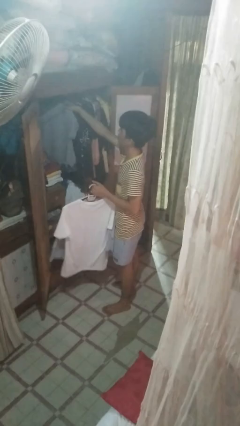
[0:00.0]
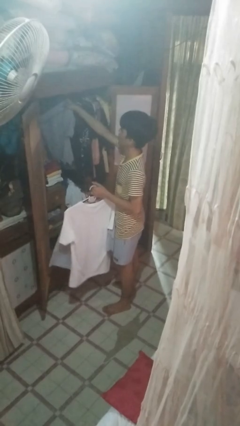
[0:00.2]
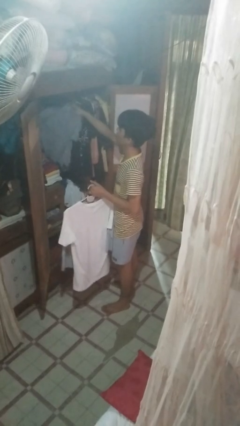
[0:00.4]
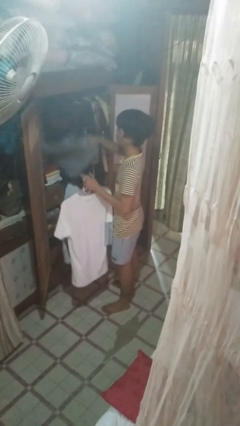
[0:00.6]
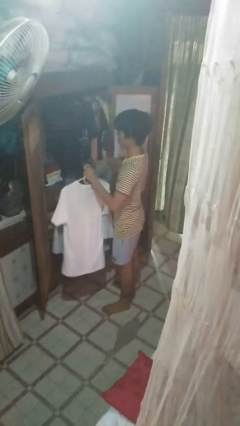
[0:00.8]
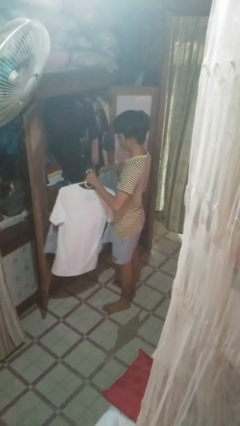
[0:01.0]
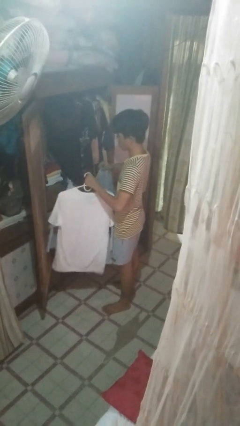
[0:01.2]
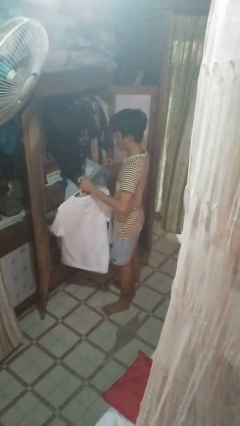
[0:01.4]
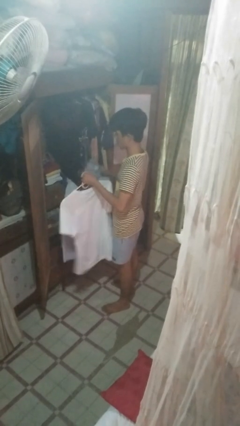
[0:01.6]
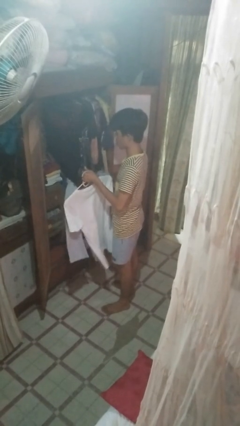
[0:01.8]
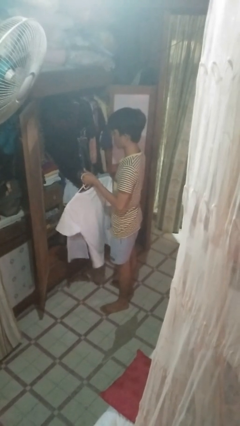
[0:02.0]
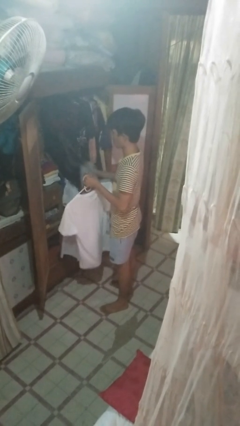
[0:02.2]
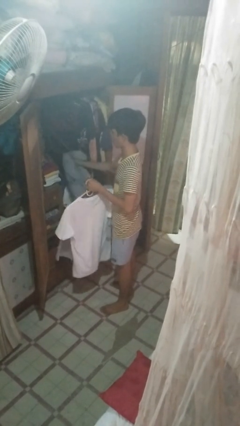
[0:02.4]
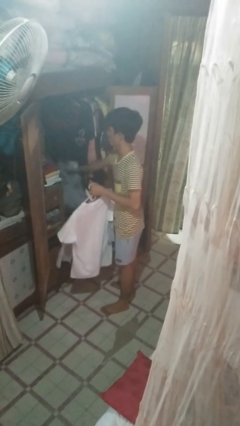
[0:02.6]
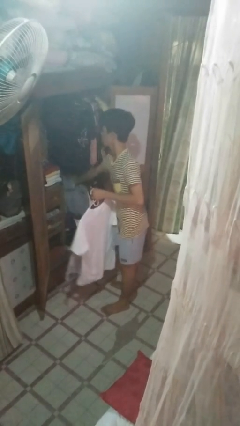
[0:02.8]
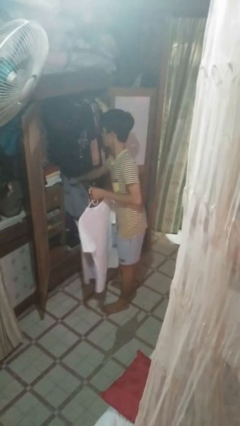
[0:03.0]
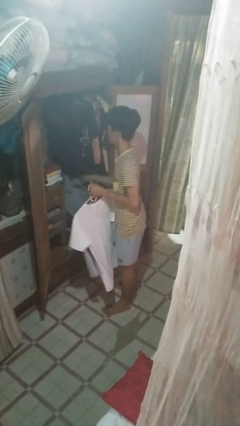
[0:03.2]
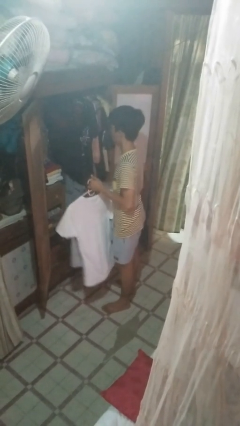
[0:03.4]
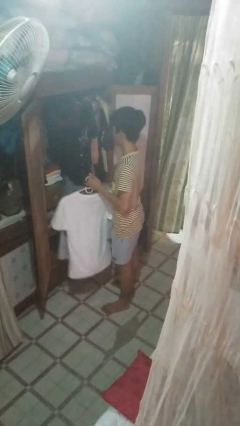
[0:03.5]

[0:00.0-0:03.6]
person takes clothes from closet

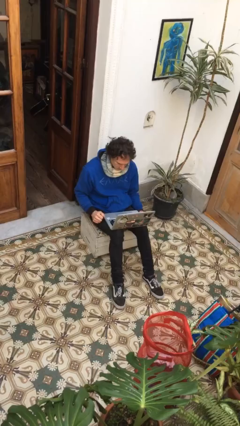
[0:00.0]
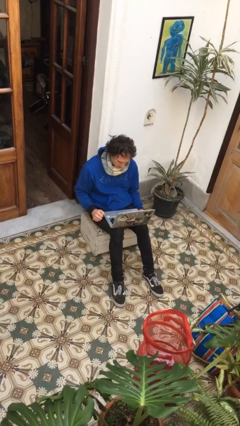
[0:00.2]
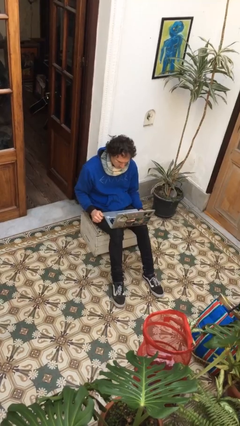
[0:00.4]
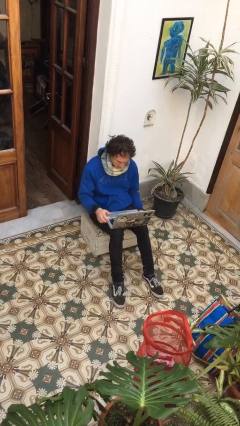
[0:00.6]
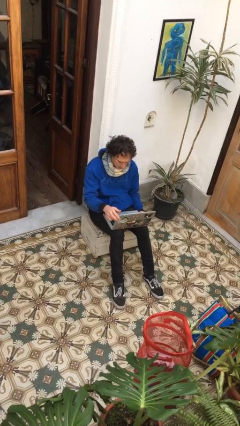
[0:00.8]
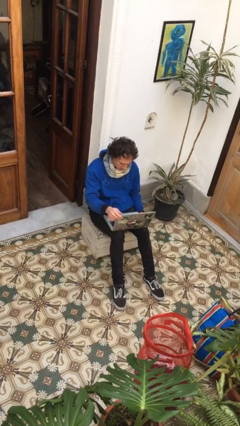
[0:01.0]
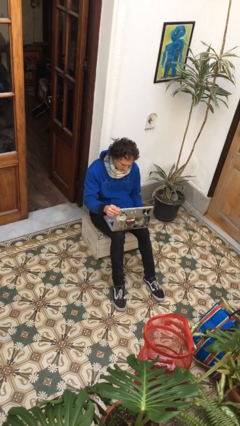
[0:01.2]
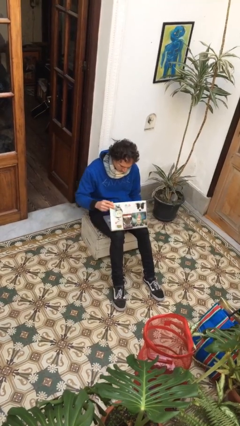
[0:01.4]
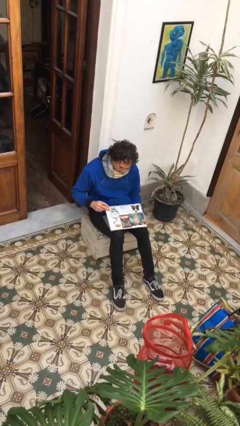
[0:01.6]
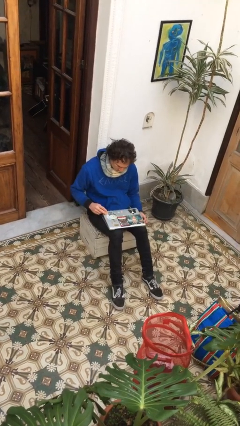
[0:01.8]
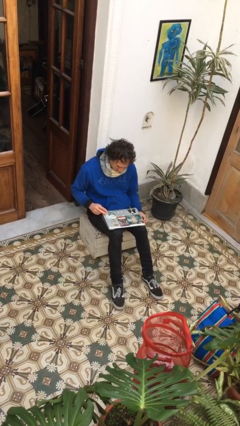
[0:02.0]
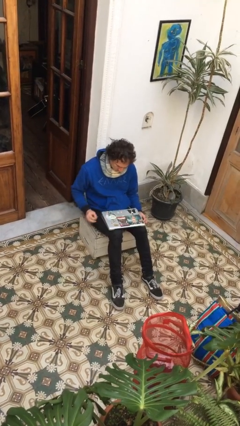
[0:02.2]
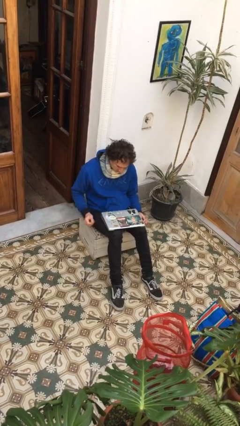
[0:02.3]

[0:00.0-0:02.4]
person closes laptop

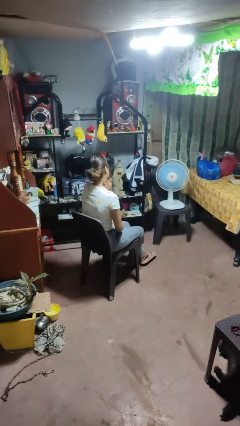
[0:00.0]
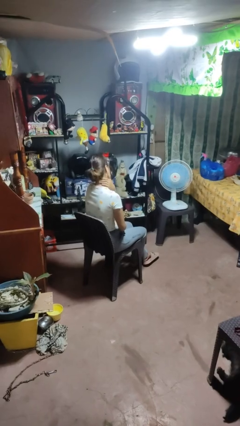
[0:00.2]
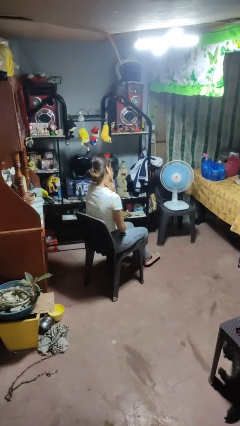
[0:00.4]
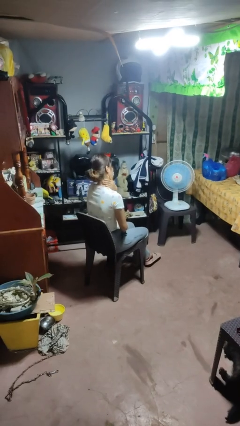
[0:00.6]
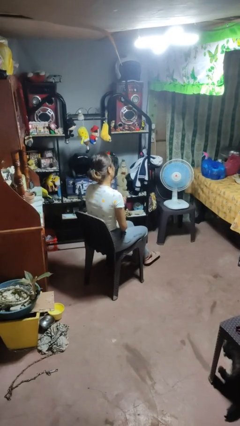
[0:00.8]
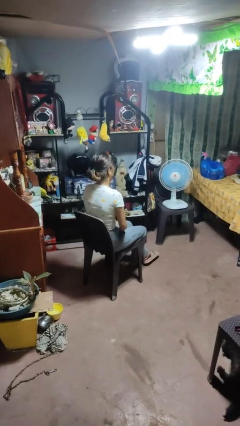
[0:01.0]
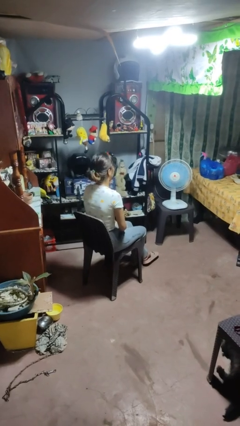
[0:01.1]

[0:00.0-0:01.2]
person rubs neck

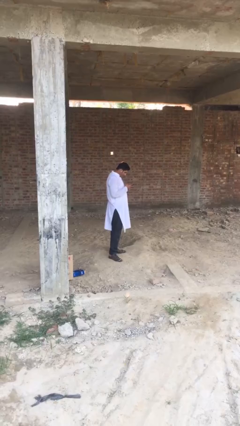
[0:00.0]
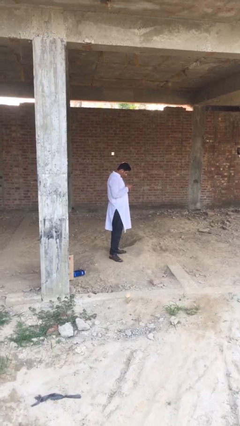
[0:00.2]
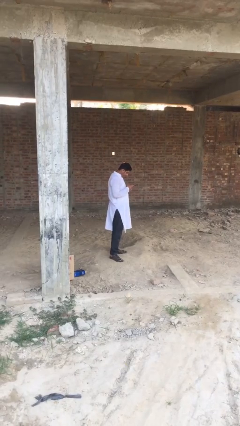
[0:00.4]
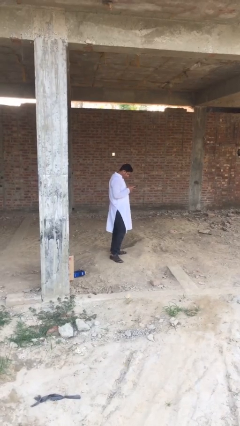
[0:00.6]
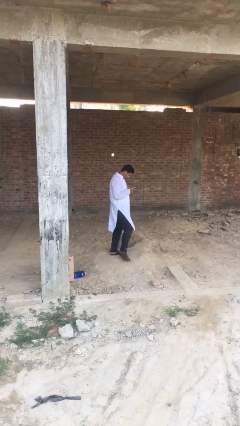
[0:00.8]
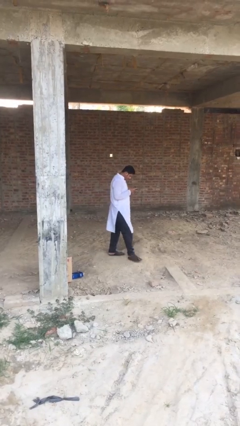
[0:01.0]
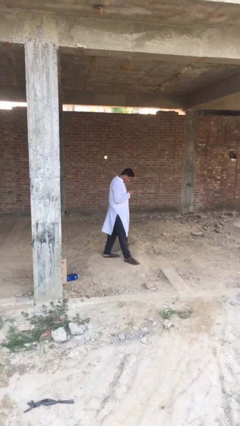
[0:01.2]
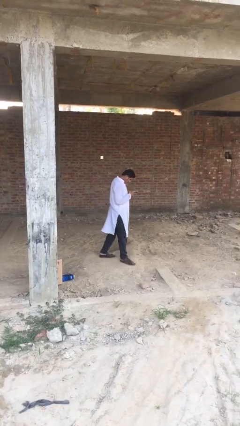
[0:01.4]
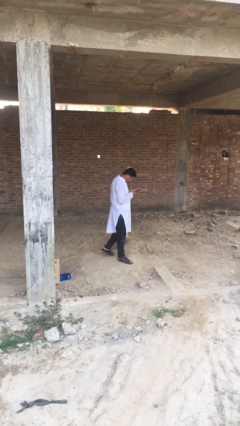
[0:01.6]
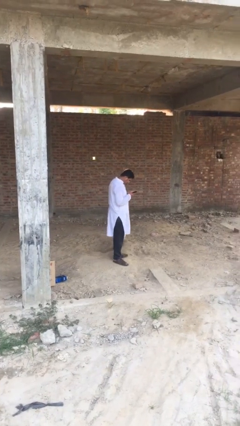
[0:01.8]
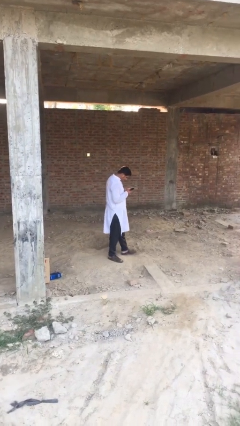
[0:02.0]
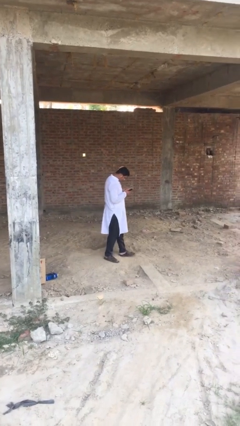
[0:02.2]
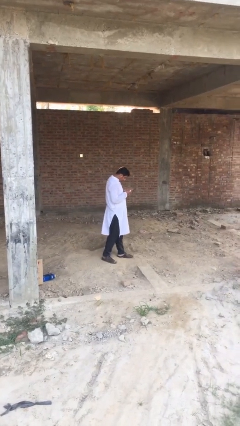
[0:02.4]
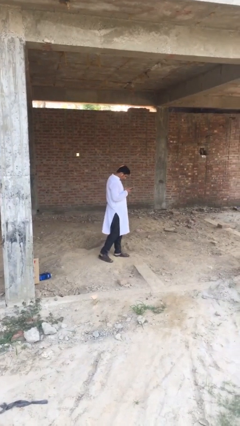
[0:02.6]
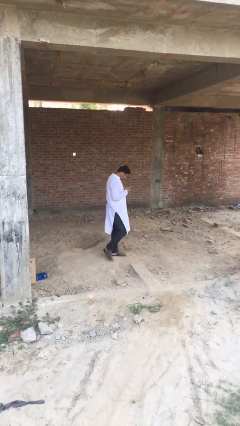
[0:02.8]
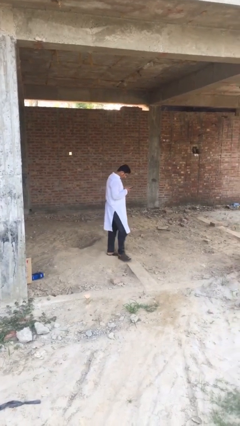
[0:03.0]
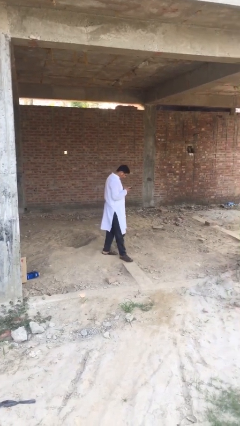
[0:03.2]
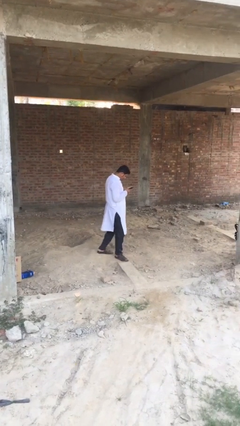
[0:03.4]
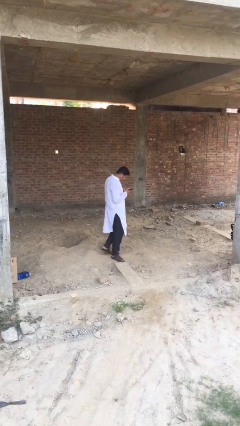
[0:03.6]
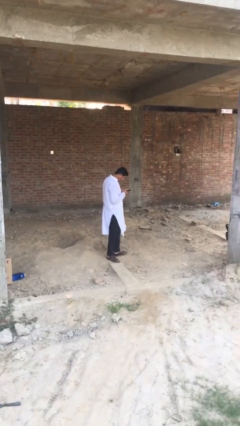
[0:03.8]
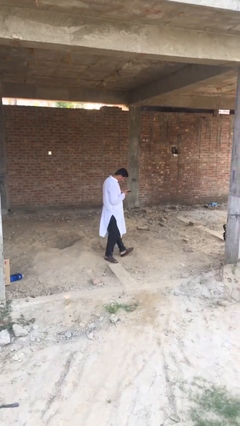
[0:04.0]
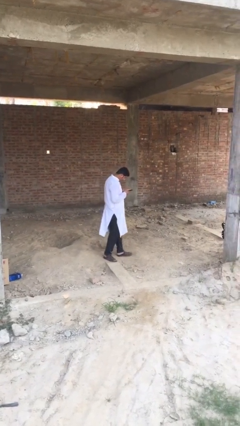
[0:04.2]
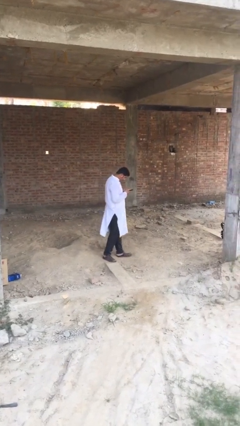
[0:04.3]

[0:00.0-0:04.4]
person texts on phone

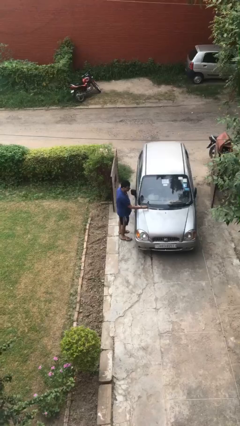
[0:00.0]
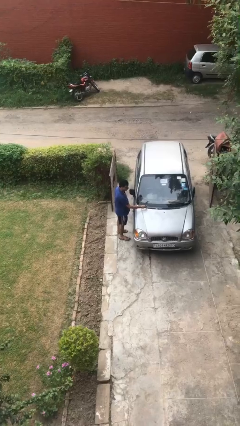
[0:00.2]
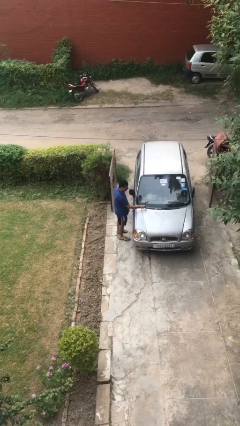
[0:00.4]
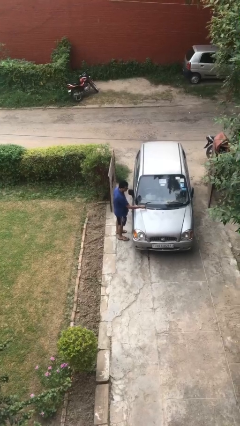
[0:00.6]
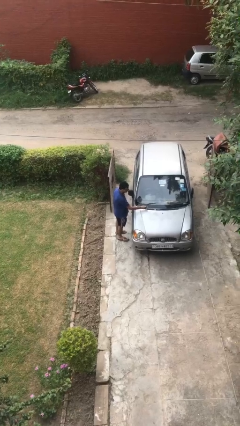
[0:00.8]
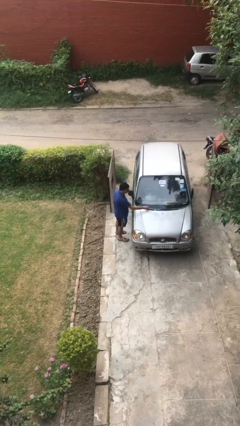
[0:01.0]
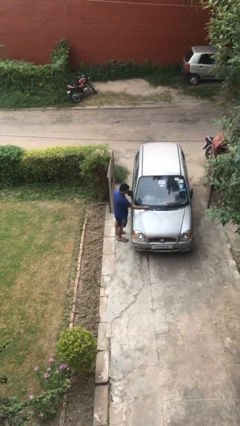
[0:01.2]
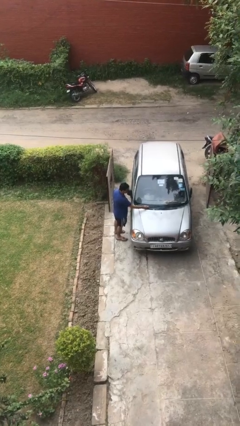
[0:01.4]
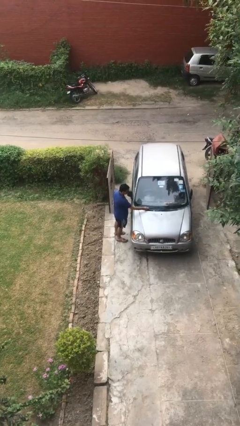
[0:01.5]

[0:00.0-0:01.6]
person flips down car wipers

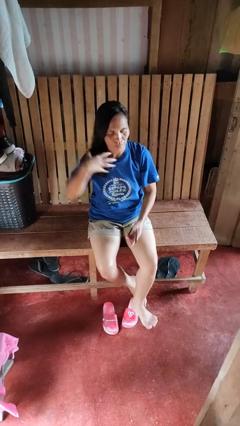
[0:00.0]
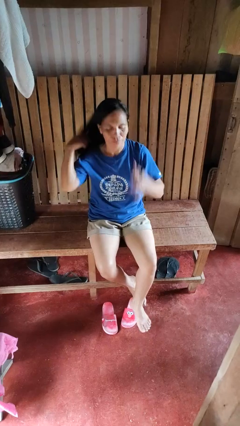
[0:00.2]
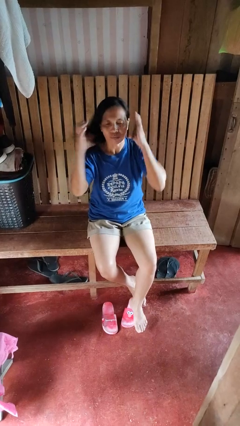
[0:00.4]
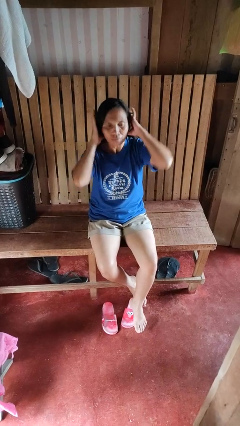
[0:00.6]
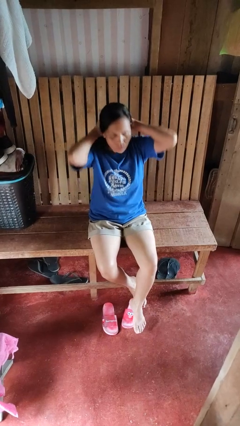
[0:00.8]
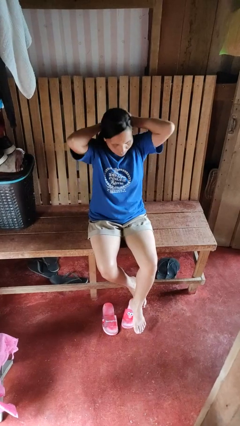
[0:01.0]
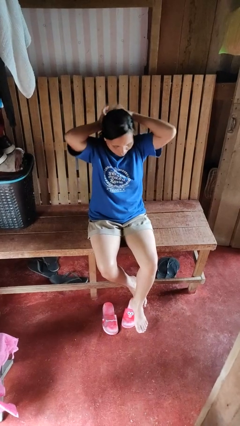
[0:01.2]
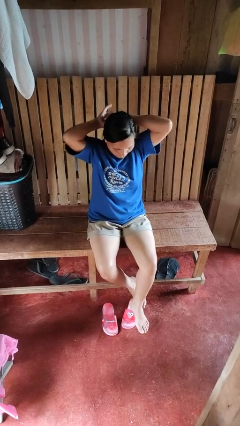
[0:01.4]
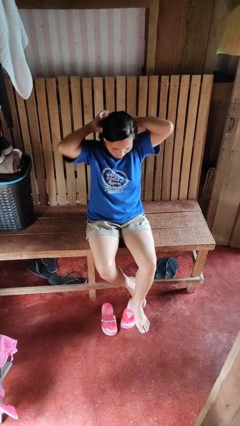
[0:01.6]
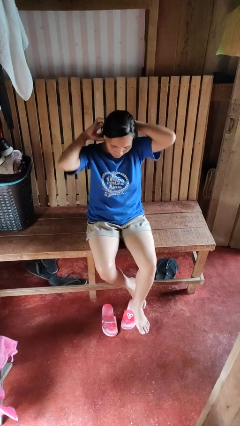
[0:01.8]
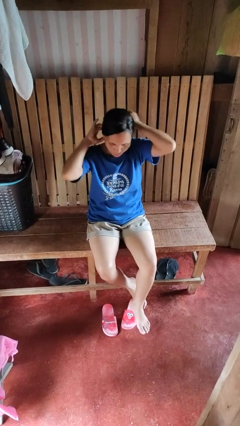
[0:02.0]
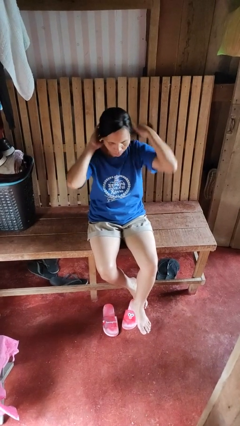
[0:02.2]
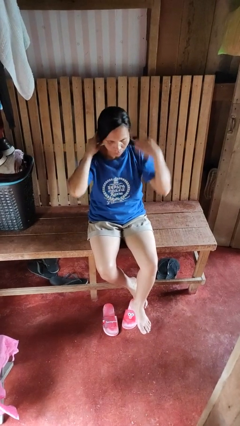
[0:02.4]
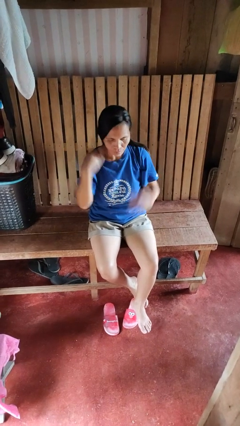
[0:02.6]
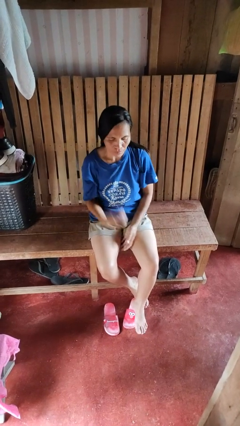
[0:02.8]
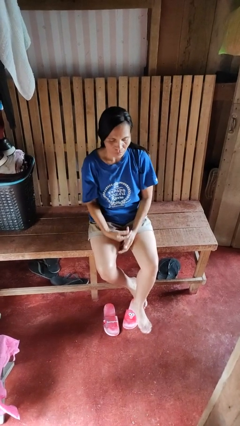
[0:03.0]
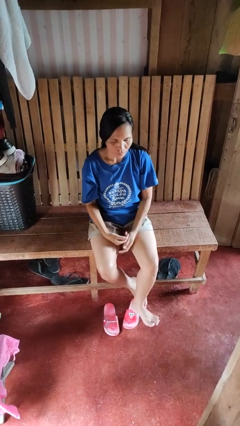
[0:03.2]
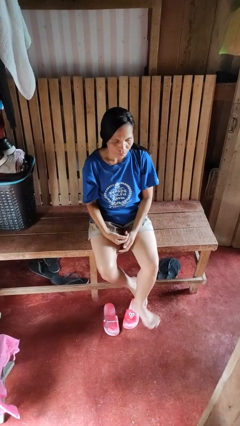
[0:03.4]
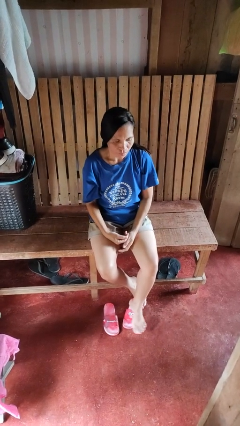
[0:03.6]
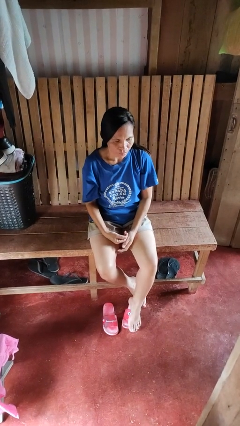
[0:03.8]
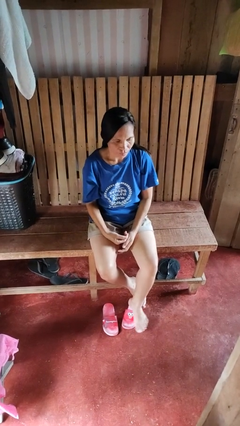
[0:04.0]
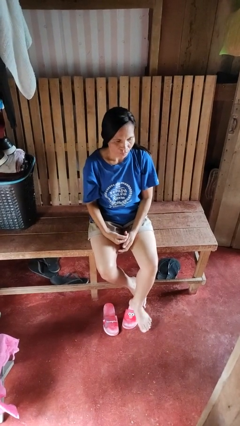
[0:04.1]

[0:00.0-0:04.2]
person puts hair in ponytail

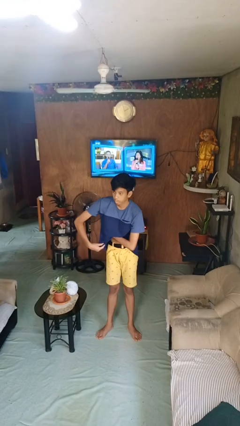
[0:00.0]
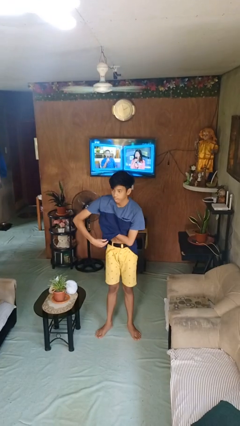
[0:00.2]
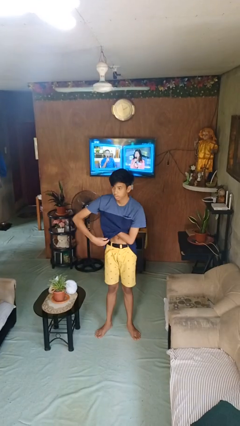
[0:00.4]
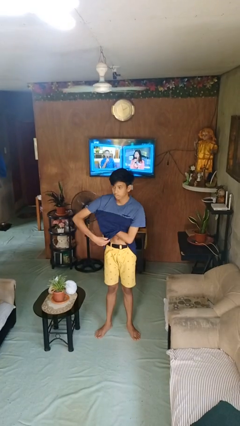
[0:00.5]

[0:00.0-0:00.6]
person applies deodorant
